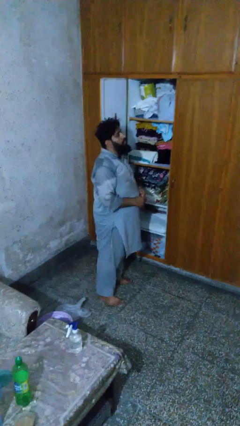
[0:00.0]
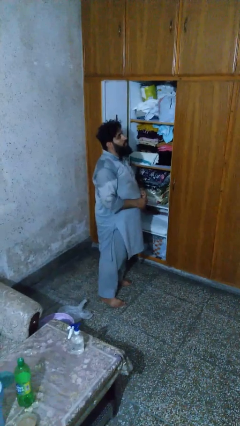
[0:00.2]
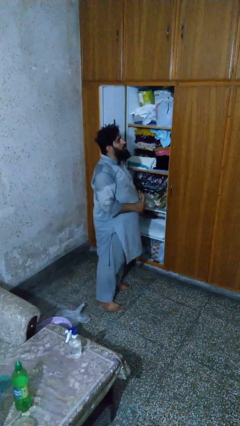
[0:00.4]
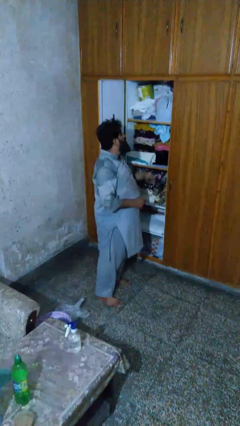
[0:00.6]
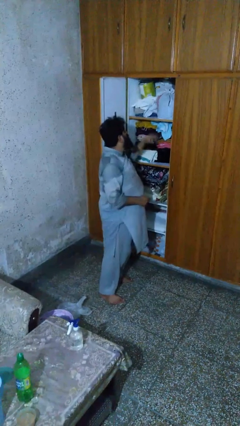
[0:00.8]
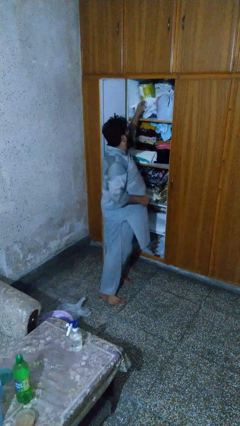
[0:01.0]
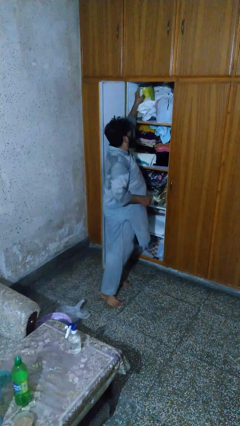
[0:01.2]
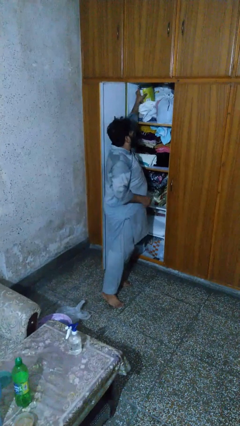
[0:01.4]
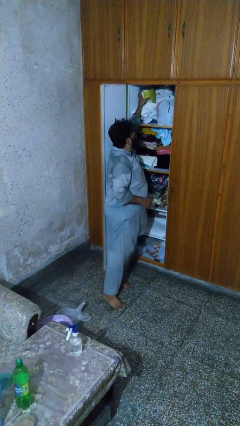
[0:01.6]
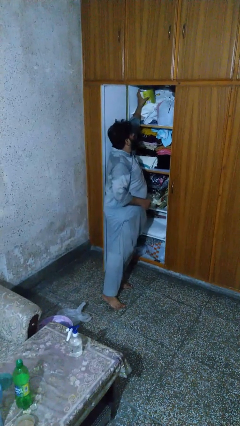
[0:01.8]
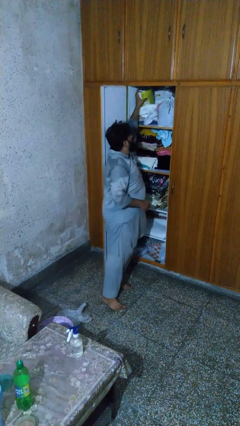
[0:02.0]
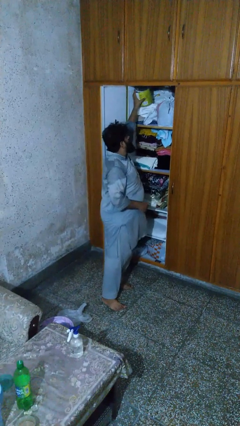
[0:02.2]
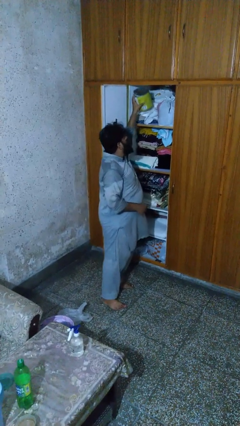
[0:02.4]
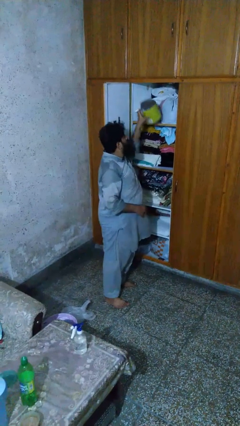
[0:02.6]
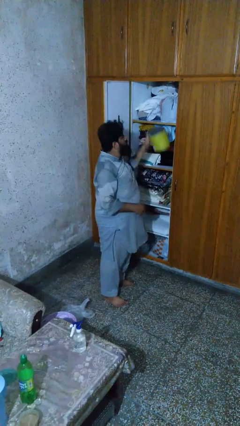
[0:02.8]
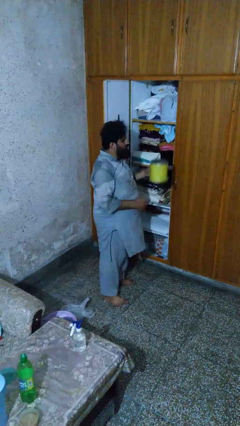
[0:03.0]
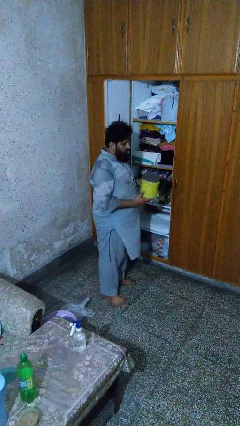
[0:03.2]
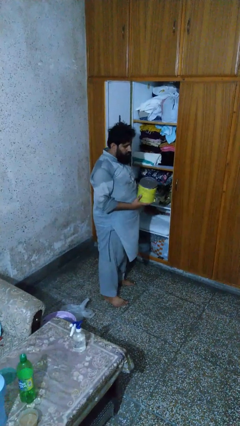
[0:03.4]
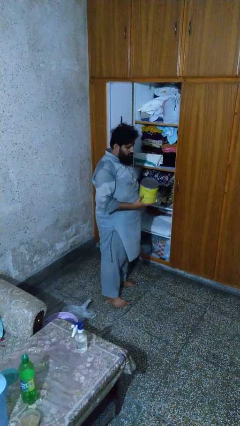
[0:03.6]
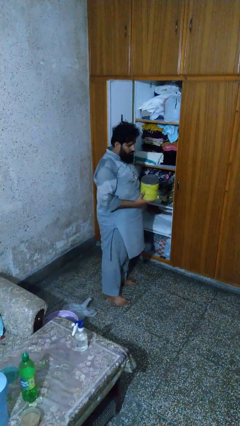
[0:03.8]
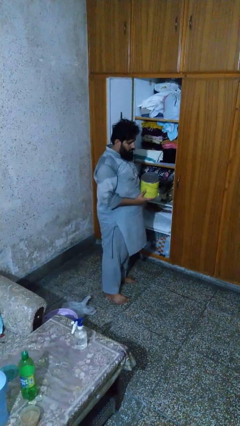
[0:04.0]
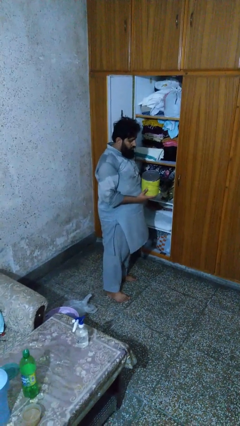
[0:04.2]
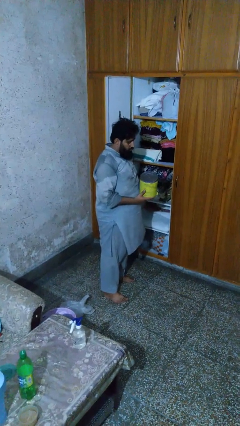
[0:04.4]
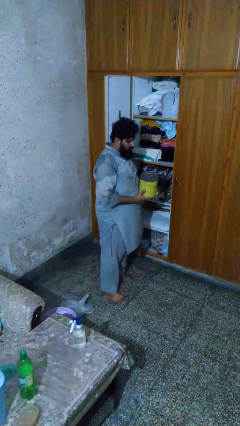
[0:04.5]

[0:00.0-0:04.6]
person picks up object from shelf

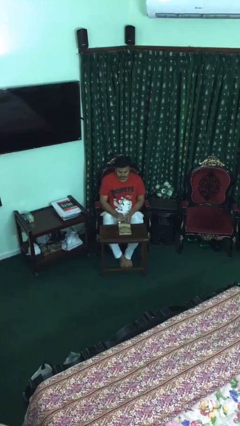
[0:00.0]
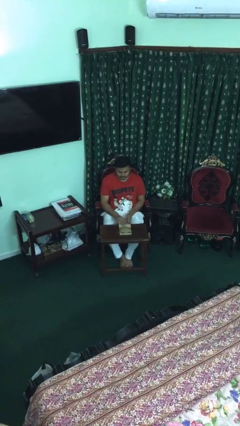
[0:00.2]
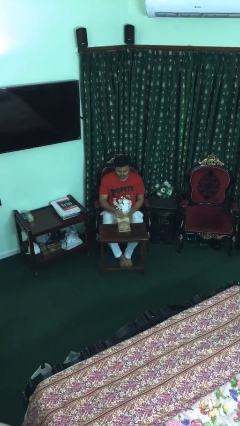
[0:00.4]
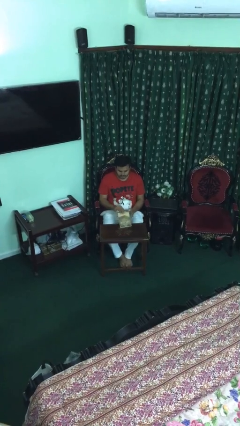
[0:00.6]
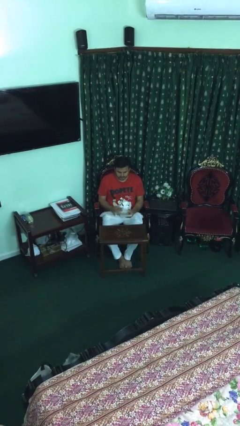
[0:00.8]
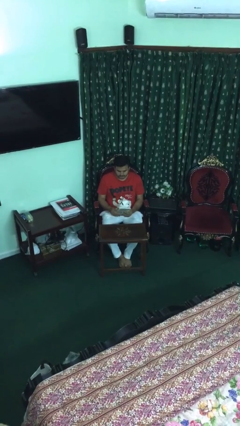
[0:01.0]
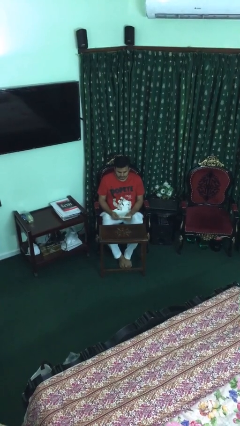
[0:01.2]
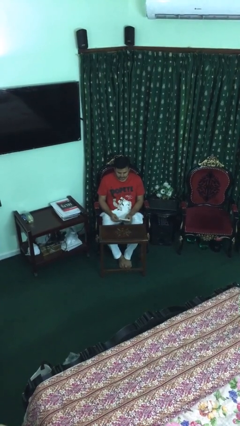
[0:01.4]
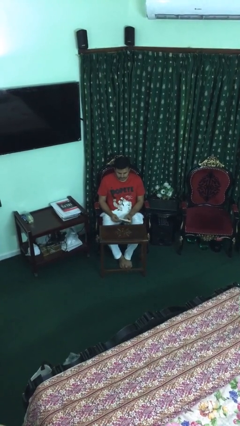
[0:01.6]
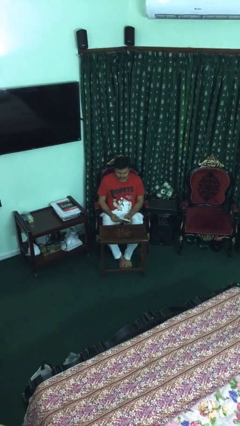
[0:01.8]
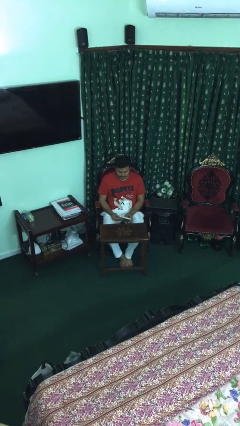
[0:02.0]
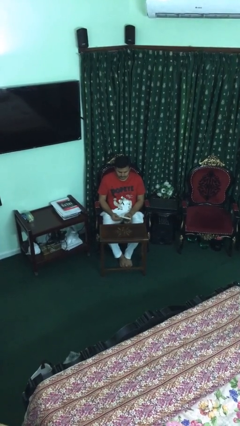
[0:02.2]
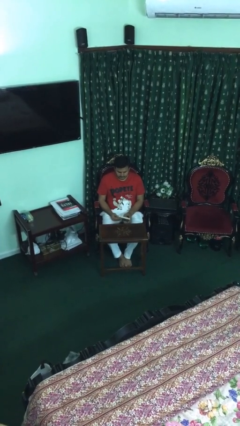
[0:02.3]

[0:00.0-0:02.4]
person picks up object from table

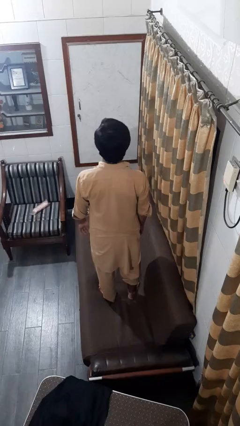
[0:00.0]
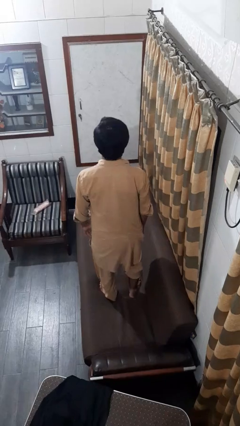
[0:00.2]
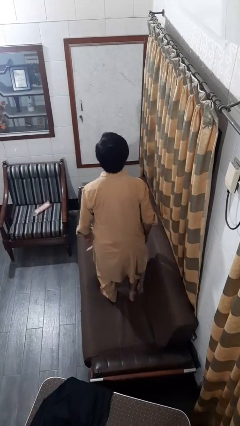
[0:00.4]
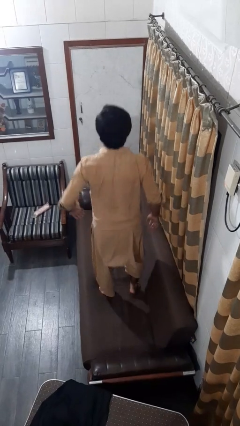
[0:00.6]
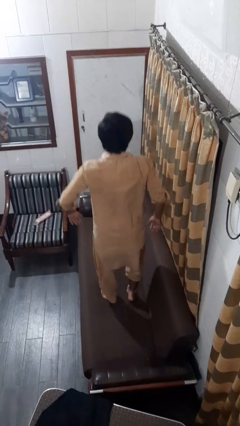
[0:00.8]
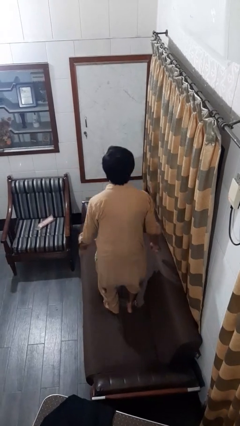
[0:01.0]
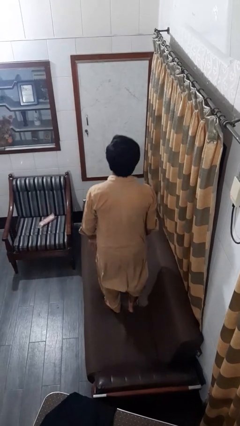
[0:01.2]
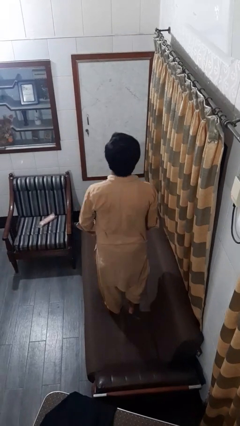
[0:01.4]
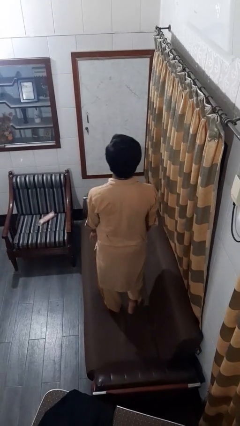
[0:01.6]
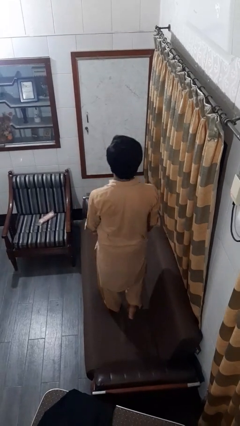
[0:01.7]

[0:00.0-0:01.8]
person jumps on couch

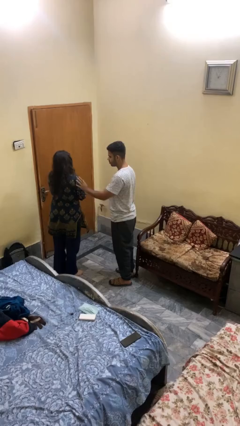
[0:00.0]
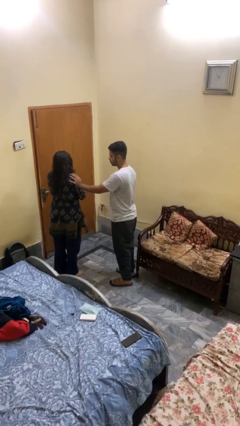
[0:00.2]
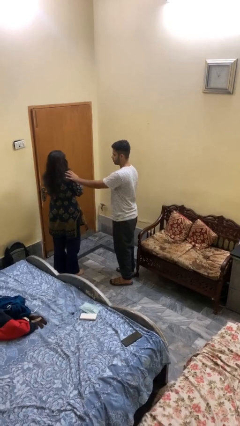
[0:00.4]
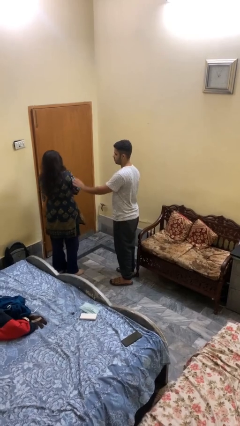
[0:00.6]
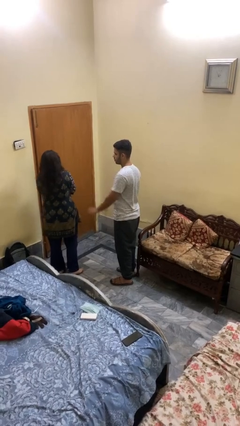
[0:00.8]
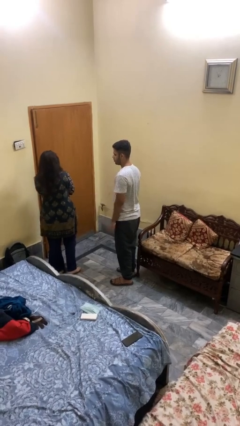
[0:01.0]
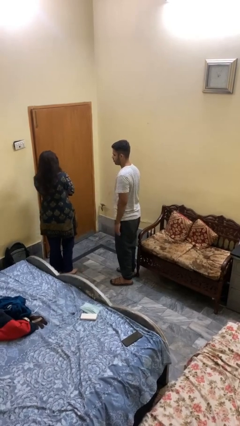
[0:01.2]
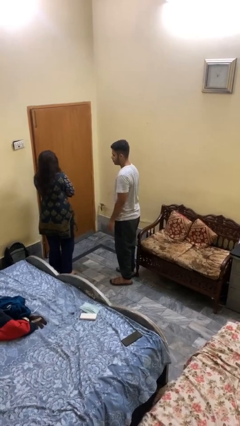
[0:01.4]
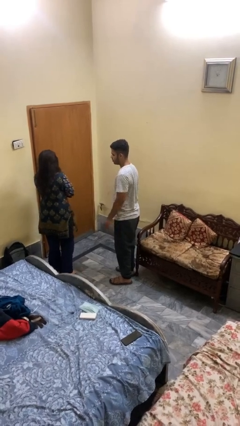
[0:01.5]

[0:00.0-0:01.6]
person shoves person

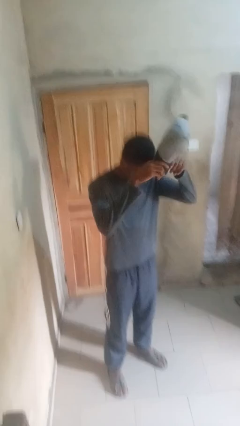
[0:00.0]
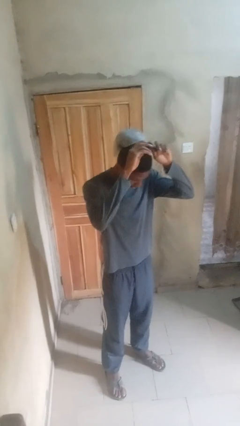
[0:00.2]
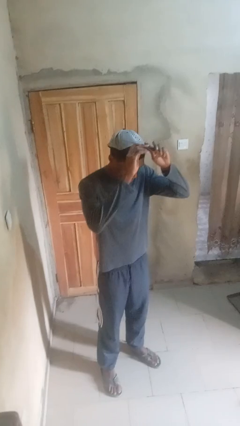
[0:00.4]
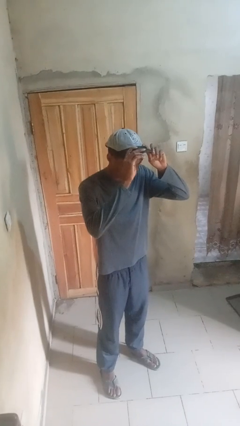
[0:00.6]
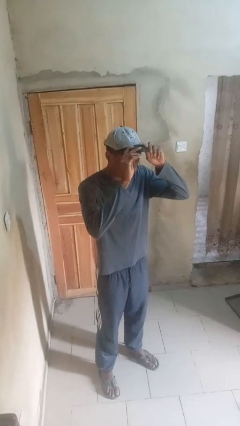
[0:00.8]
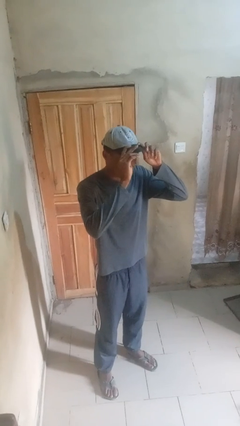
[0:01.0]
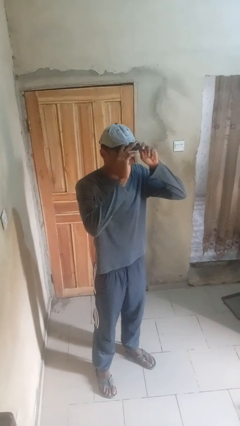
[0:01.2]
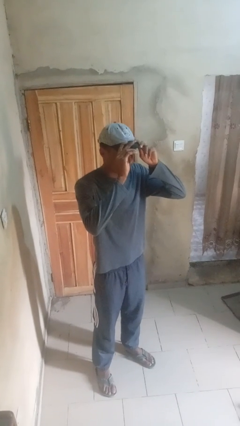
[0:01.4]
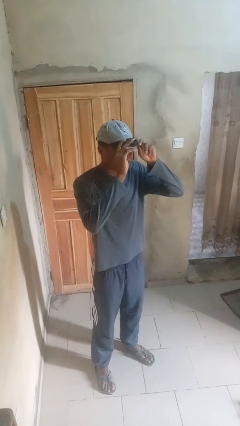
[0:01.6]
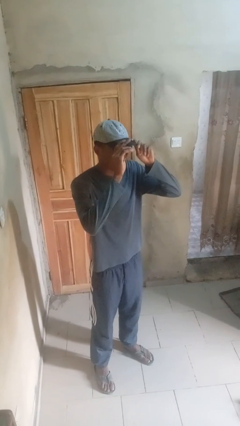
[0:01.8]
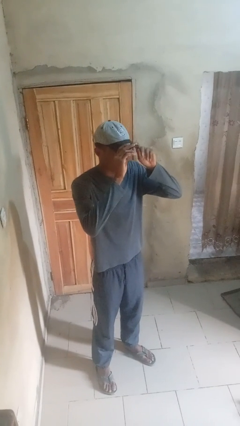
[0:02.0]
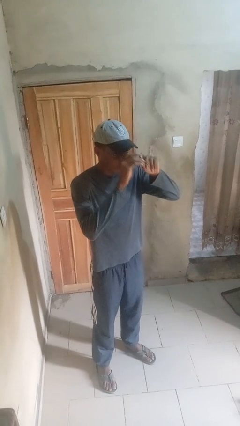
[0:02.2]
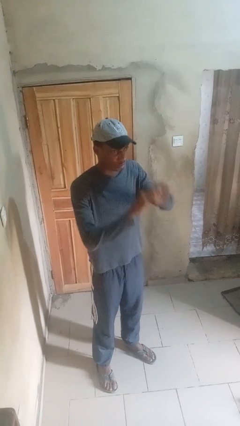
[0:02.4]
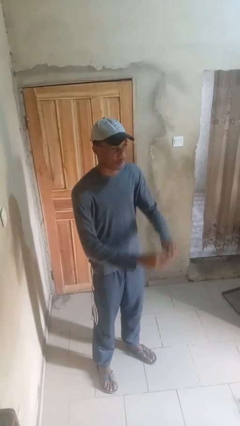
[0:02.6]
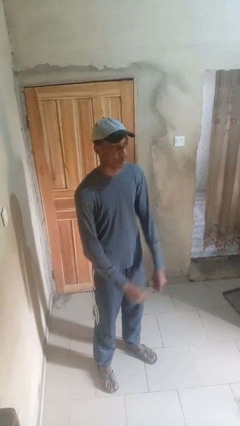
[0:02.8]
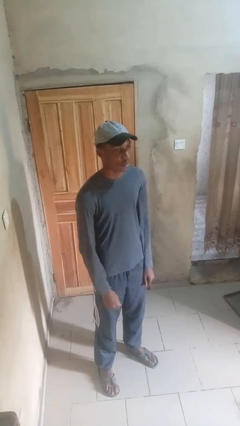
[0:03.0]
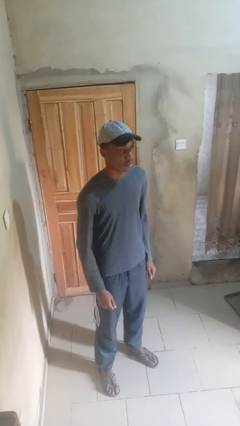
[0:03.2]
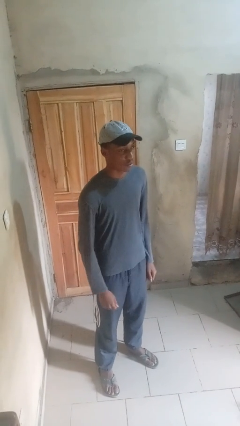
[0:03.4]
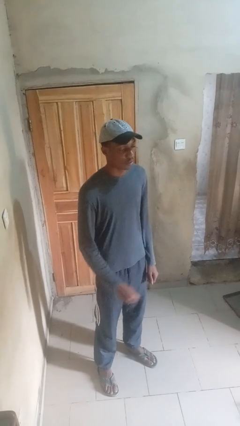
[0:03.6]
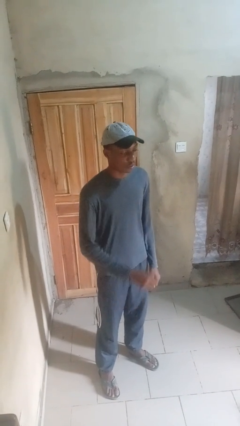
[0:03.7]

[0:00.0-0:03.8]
person puts on hat

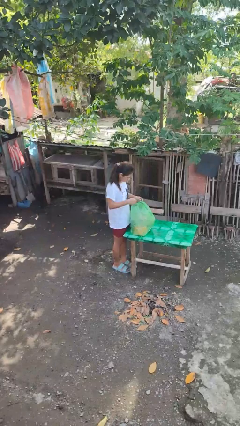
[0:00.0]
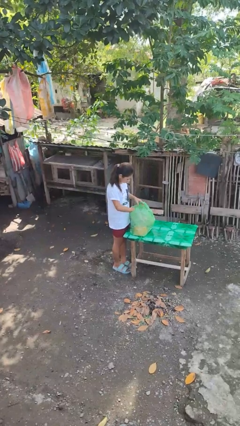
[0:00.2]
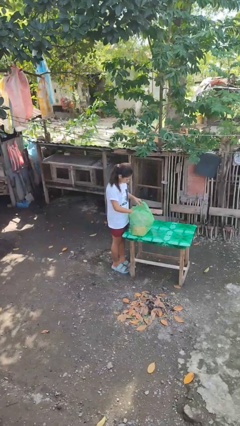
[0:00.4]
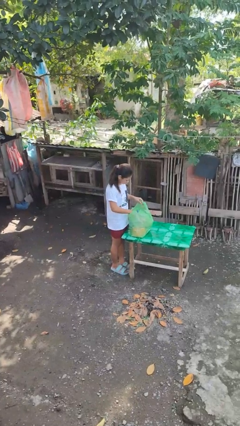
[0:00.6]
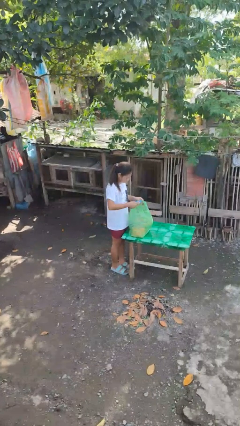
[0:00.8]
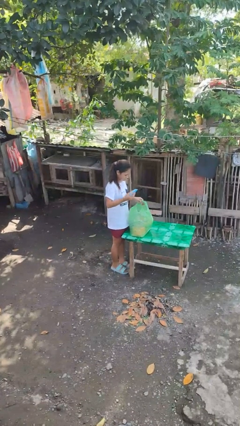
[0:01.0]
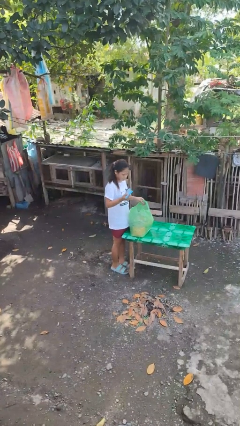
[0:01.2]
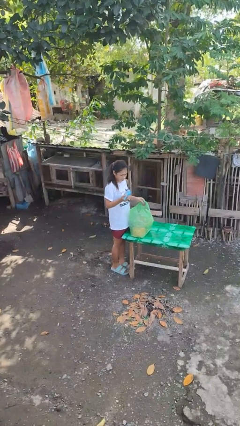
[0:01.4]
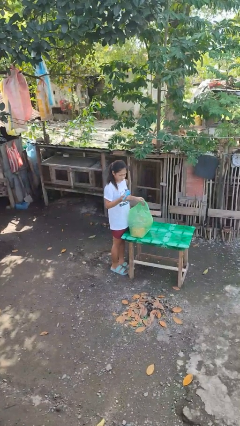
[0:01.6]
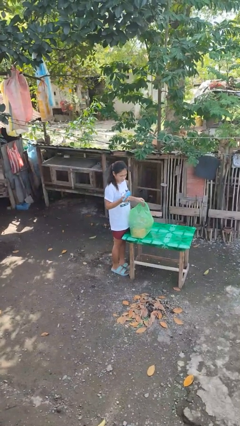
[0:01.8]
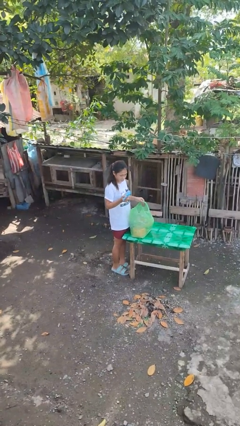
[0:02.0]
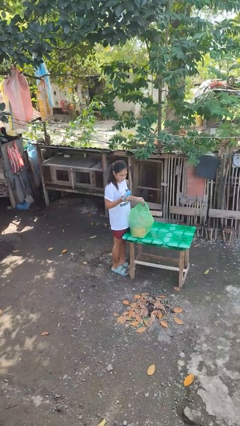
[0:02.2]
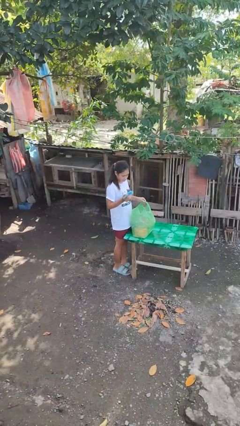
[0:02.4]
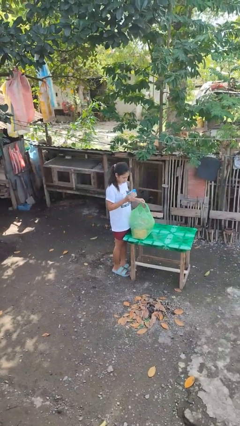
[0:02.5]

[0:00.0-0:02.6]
person takes object from bag

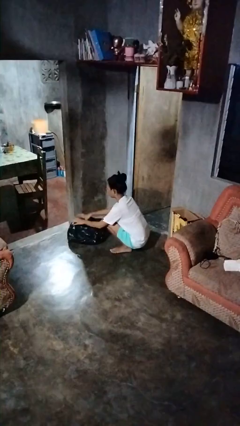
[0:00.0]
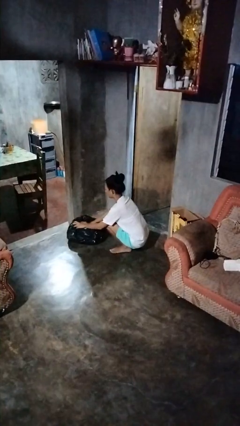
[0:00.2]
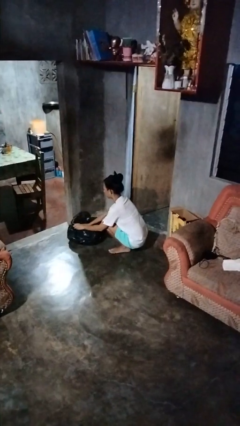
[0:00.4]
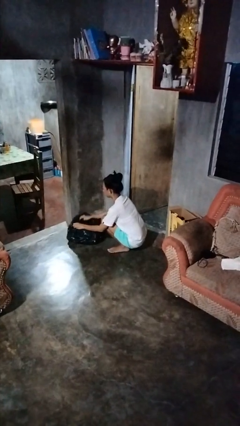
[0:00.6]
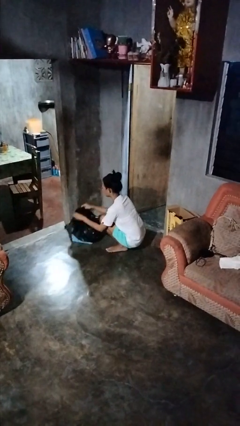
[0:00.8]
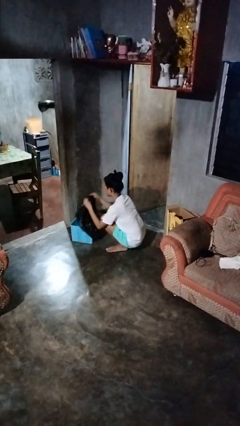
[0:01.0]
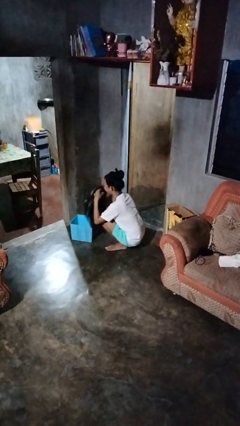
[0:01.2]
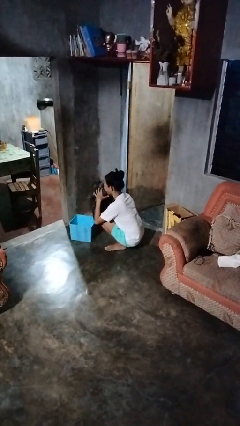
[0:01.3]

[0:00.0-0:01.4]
person removes trashbag from trashcan
